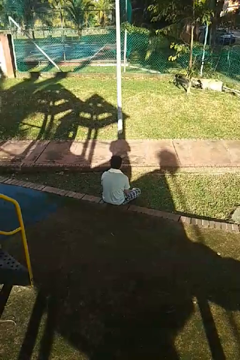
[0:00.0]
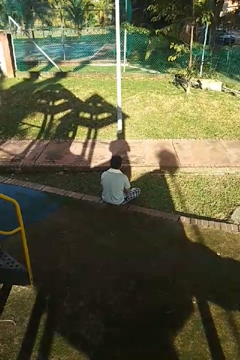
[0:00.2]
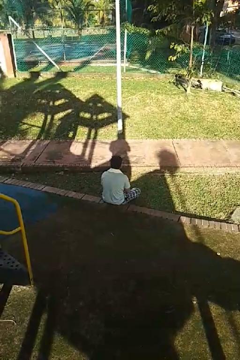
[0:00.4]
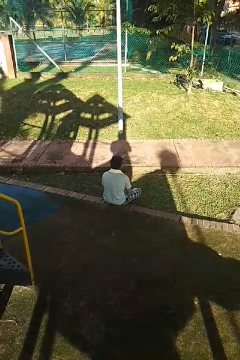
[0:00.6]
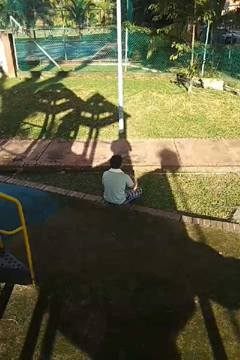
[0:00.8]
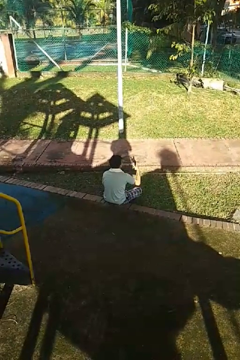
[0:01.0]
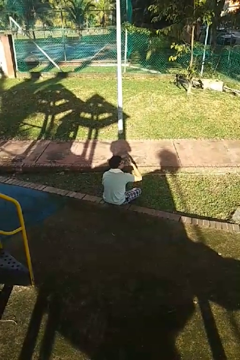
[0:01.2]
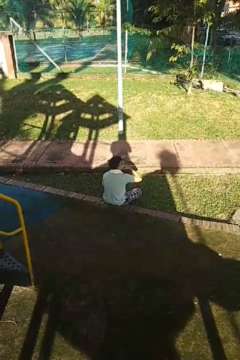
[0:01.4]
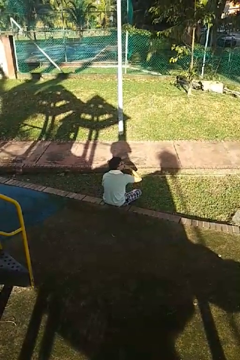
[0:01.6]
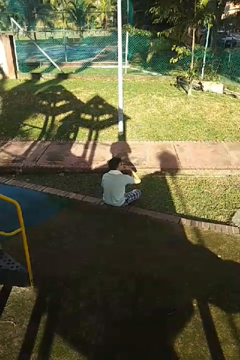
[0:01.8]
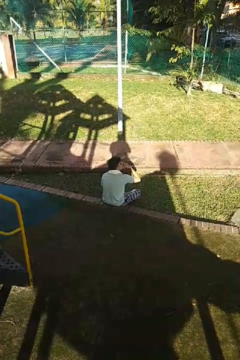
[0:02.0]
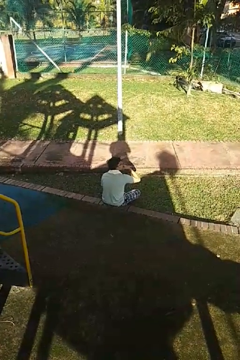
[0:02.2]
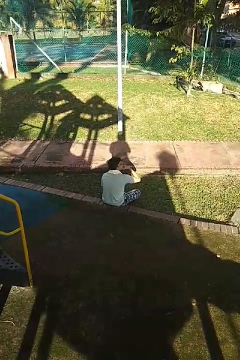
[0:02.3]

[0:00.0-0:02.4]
person strokes chin

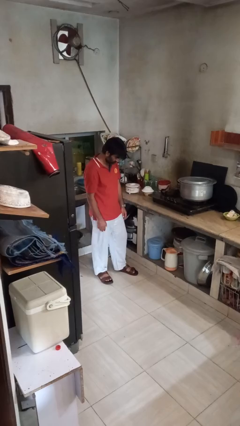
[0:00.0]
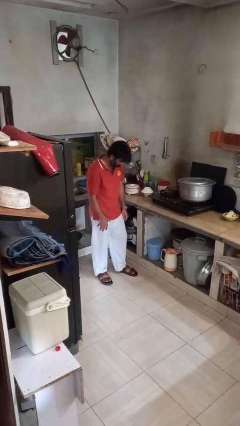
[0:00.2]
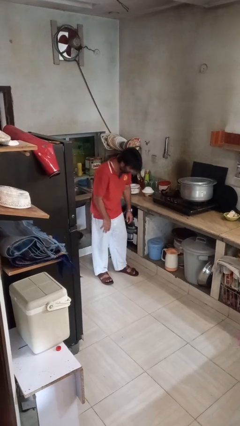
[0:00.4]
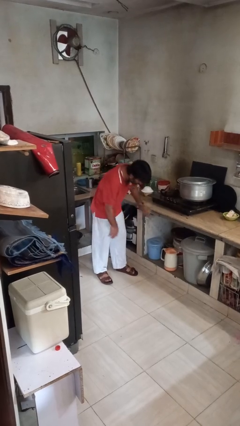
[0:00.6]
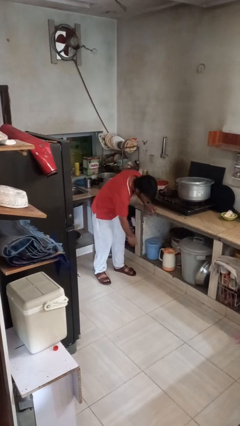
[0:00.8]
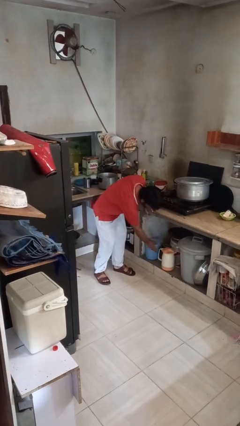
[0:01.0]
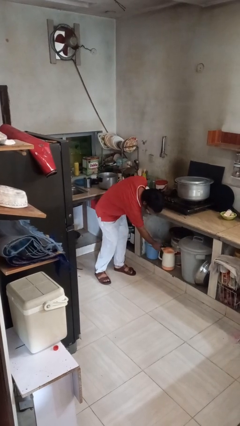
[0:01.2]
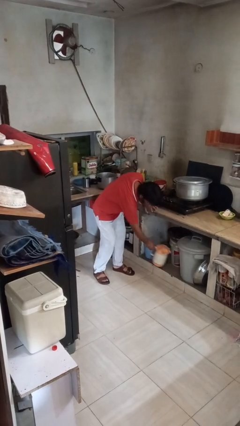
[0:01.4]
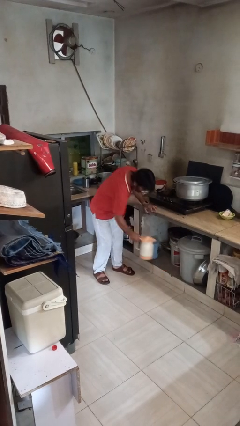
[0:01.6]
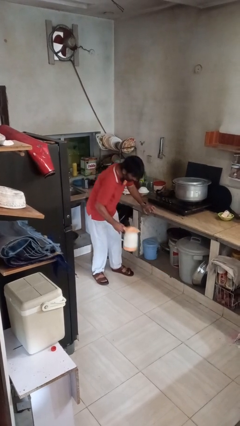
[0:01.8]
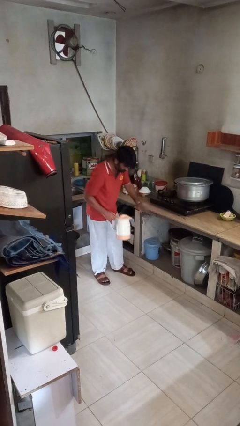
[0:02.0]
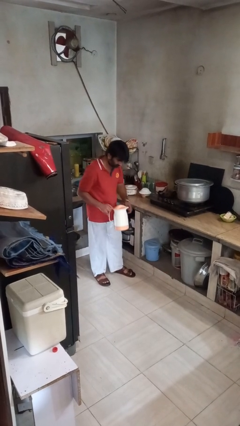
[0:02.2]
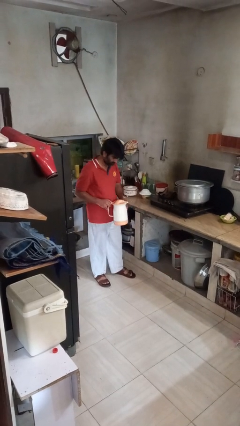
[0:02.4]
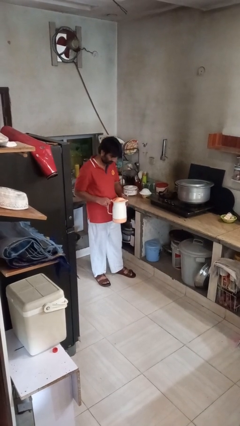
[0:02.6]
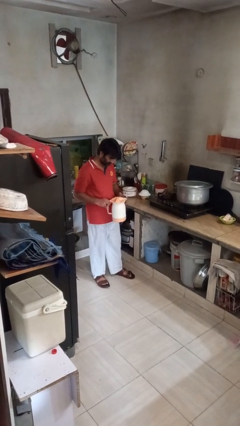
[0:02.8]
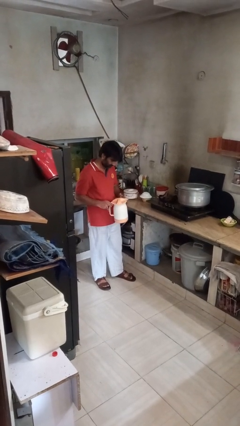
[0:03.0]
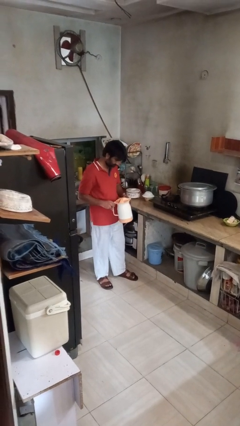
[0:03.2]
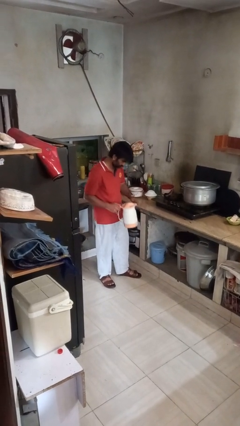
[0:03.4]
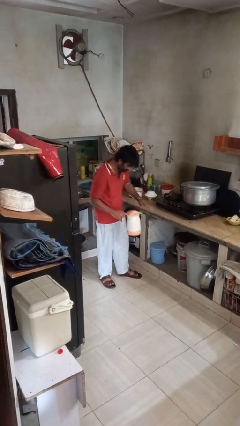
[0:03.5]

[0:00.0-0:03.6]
person picks up object from cabinet

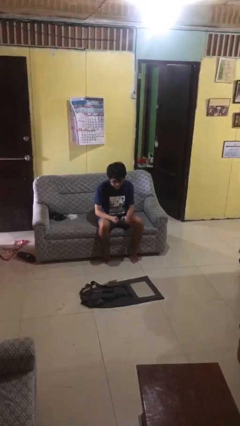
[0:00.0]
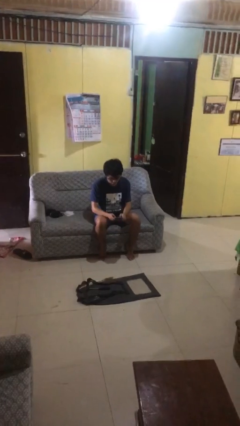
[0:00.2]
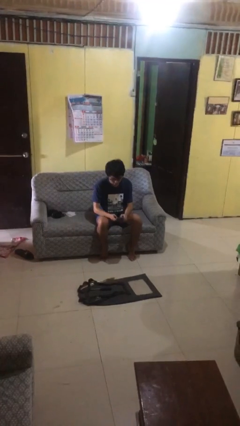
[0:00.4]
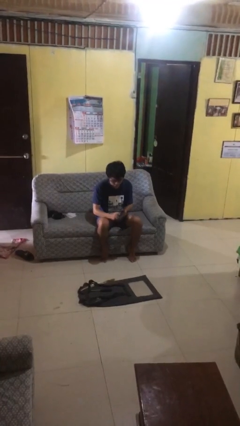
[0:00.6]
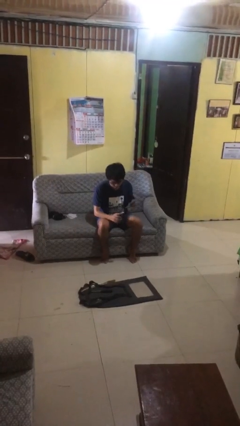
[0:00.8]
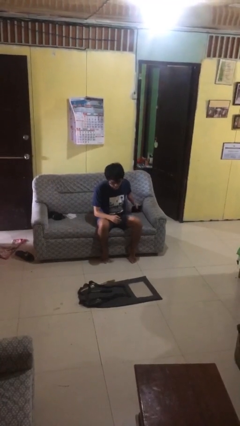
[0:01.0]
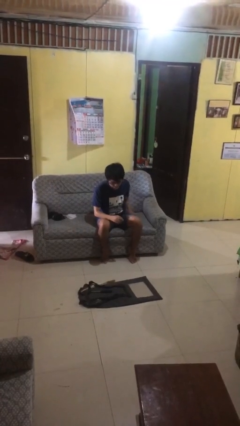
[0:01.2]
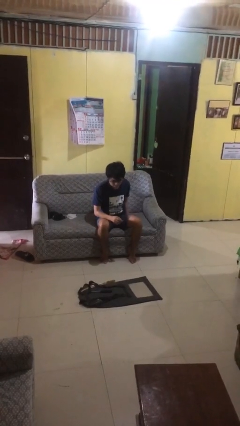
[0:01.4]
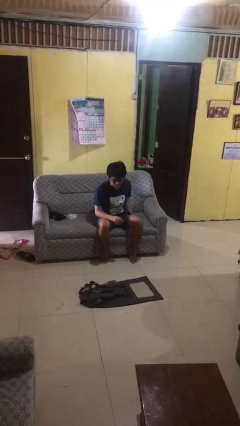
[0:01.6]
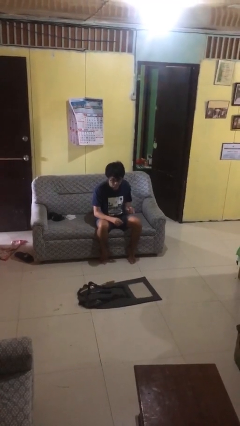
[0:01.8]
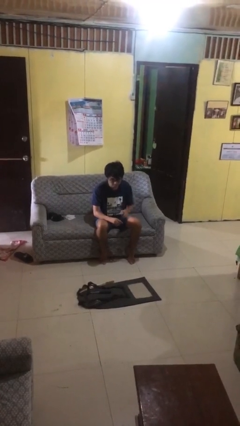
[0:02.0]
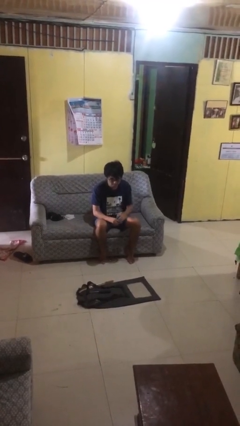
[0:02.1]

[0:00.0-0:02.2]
person puts phone into pocket

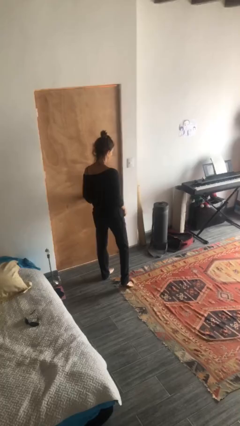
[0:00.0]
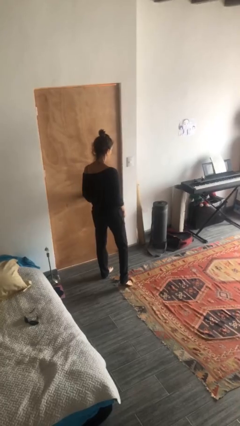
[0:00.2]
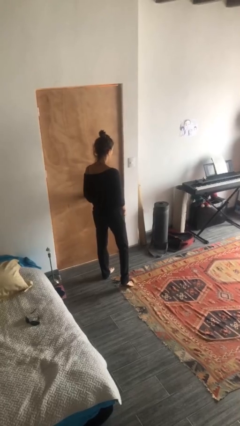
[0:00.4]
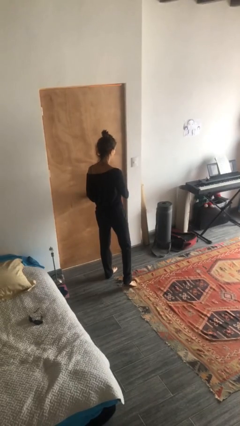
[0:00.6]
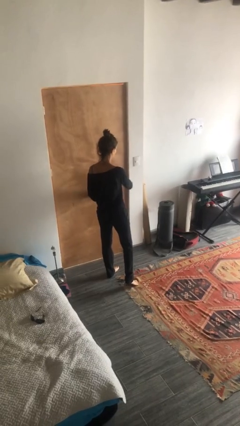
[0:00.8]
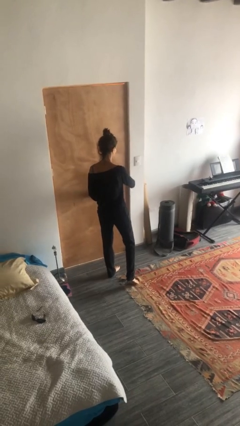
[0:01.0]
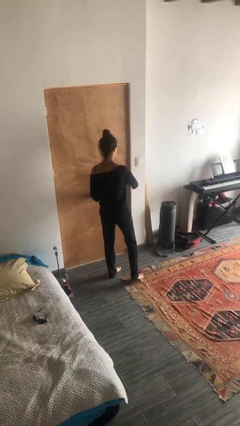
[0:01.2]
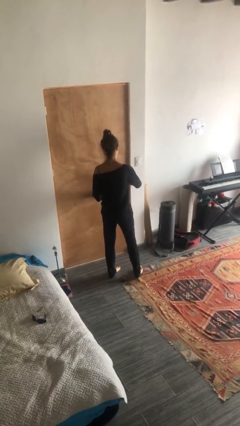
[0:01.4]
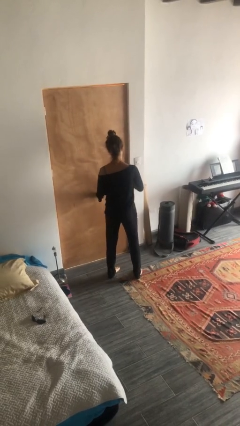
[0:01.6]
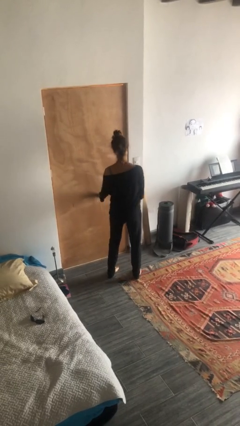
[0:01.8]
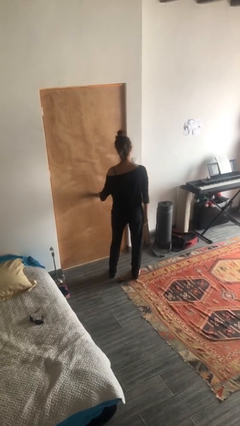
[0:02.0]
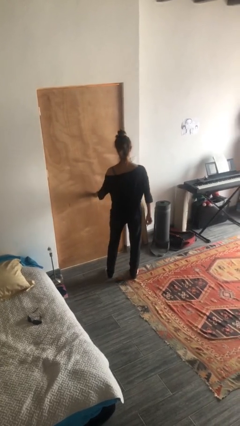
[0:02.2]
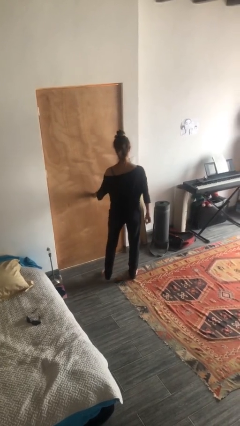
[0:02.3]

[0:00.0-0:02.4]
person unlocks door with keys

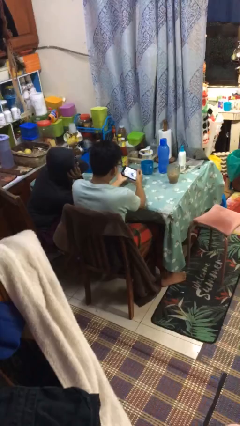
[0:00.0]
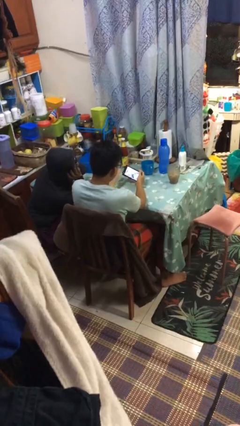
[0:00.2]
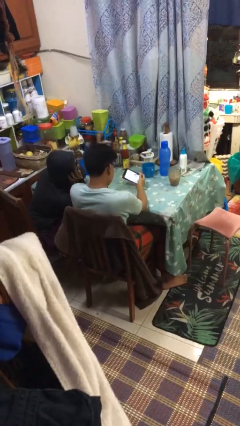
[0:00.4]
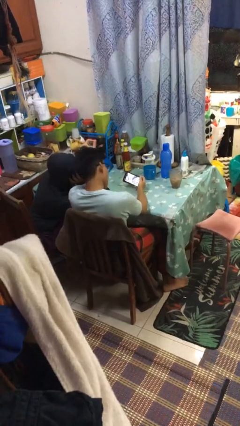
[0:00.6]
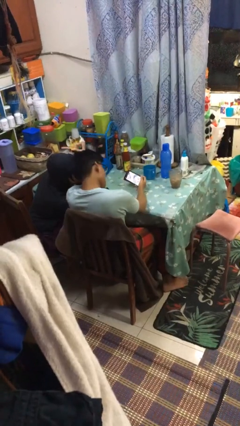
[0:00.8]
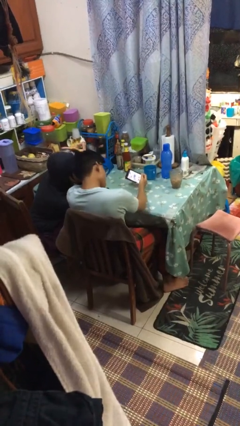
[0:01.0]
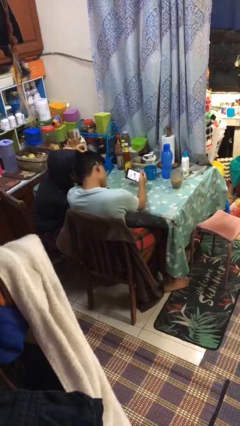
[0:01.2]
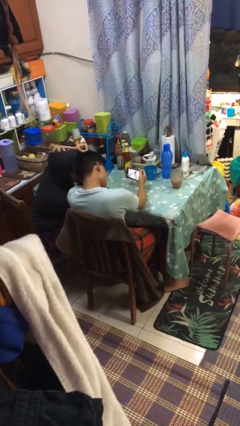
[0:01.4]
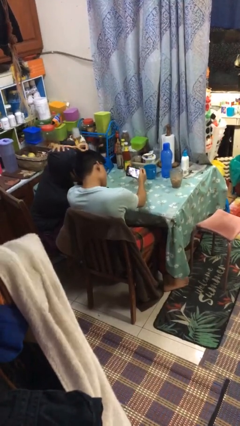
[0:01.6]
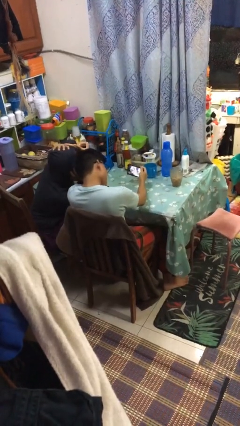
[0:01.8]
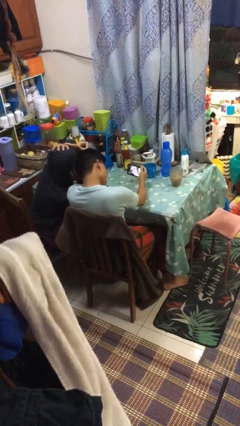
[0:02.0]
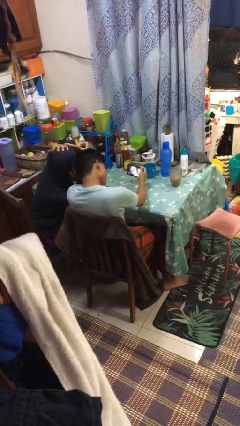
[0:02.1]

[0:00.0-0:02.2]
person takes selfie with person

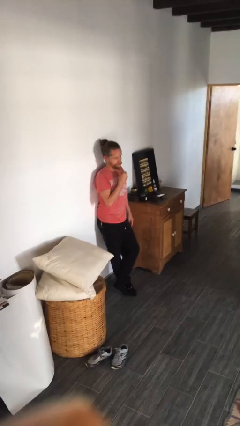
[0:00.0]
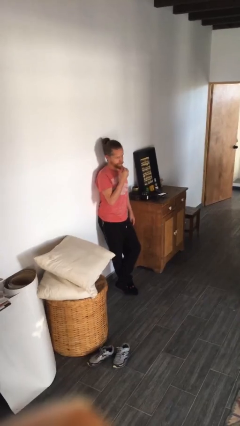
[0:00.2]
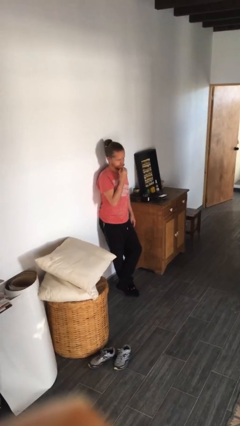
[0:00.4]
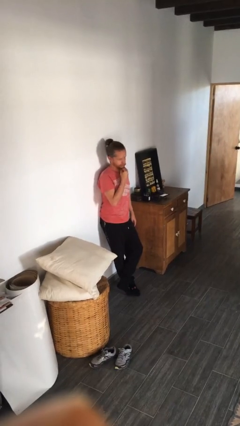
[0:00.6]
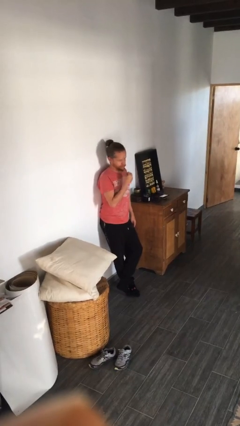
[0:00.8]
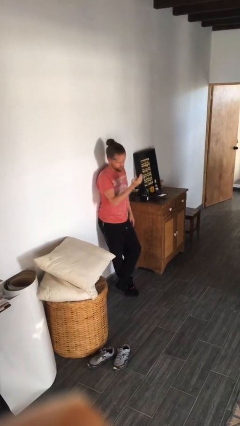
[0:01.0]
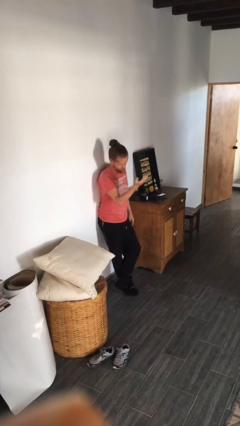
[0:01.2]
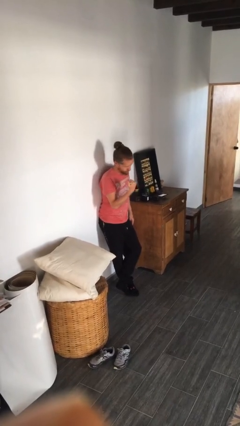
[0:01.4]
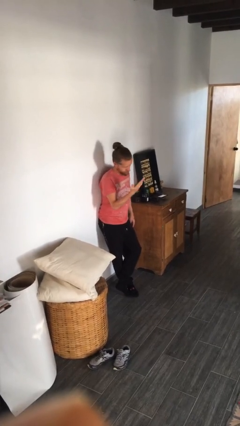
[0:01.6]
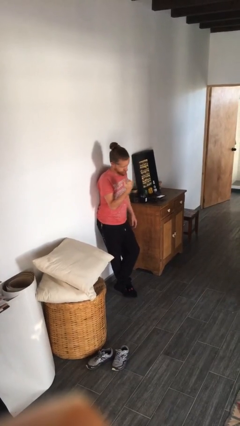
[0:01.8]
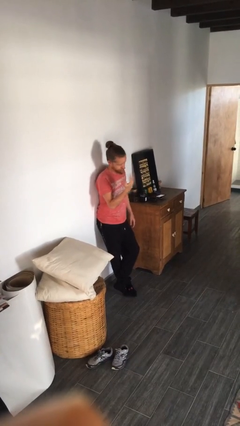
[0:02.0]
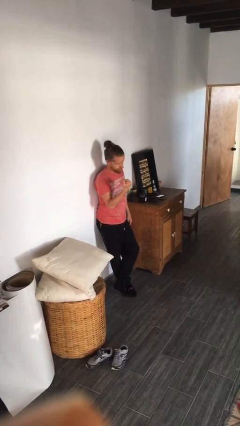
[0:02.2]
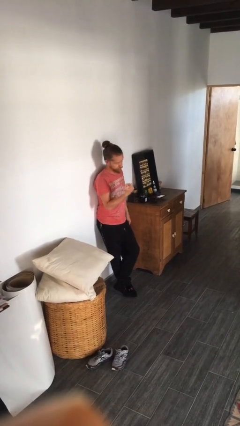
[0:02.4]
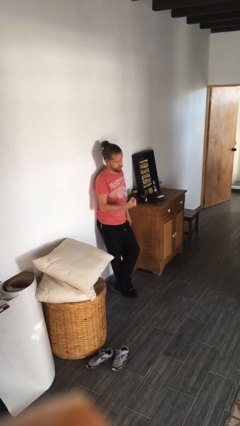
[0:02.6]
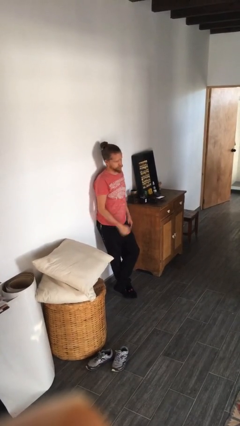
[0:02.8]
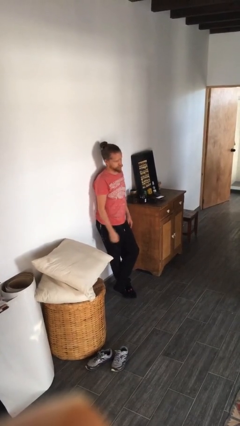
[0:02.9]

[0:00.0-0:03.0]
person gestures come here

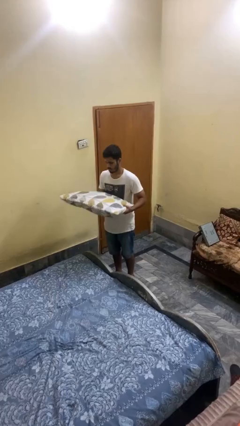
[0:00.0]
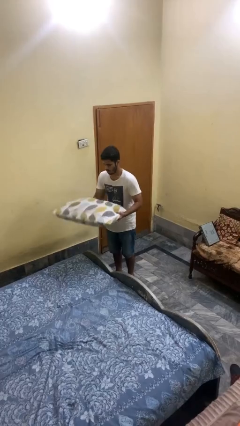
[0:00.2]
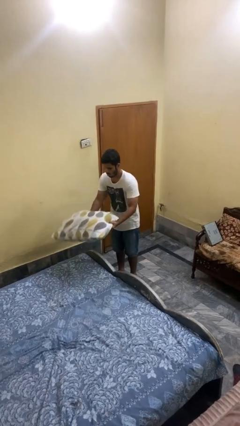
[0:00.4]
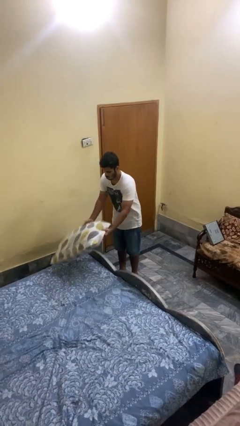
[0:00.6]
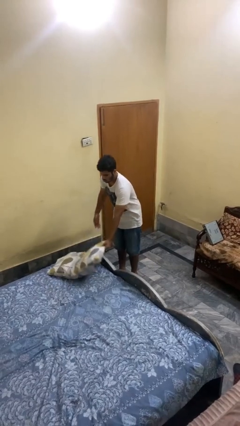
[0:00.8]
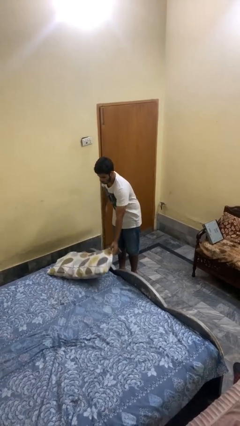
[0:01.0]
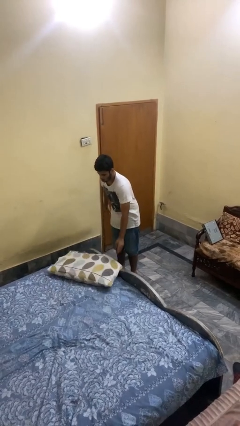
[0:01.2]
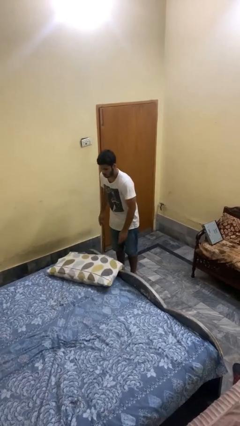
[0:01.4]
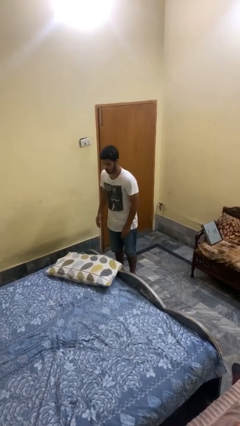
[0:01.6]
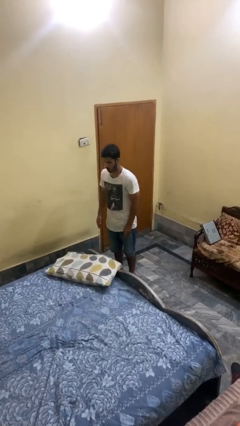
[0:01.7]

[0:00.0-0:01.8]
person puts down object on bed

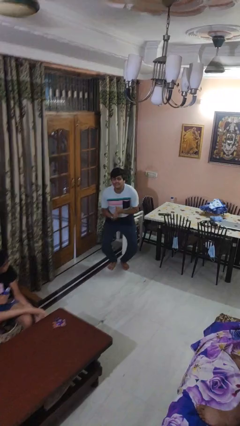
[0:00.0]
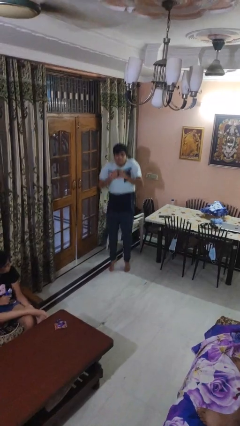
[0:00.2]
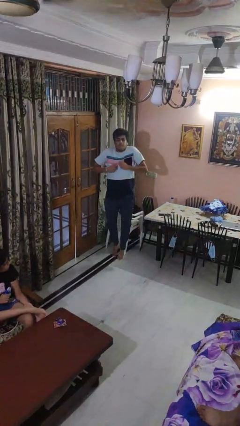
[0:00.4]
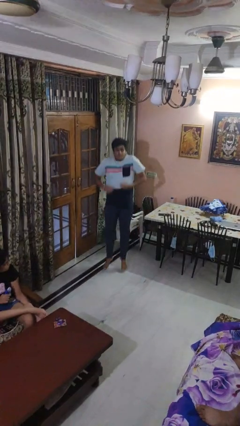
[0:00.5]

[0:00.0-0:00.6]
person jumps
